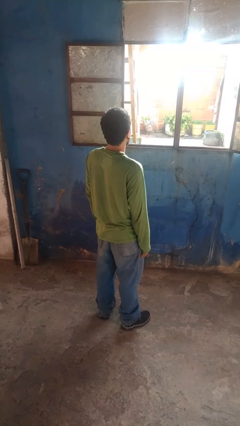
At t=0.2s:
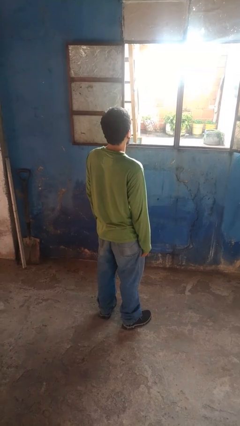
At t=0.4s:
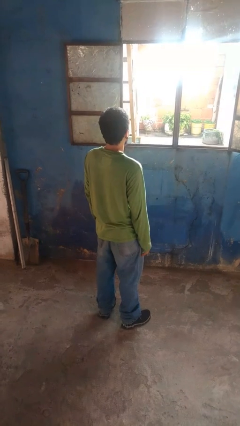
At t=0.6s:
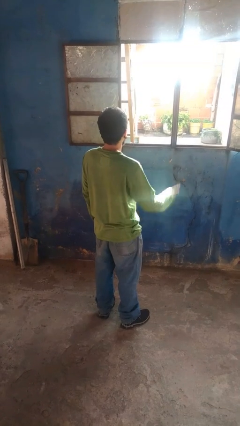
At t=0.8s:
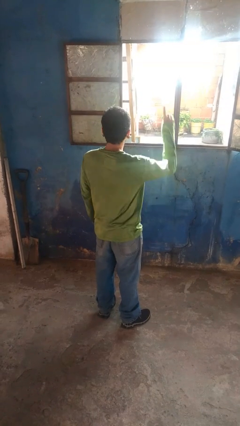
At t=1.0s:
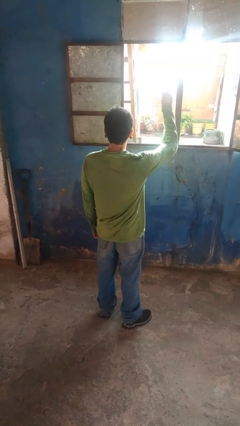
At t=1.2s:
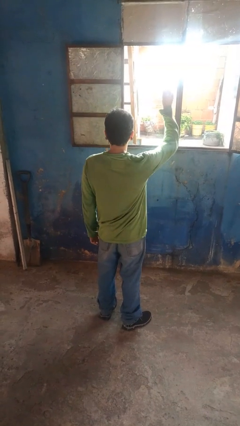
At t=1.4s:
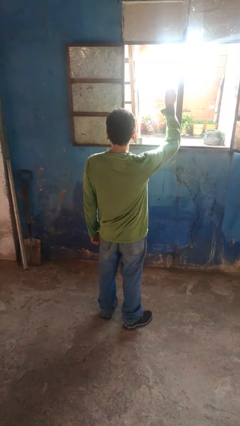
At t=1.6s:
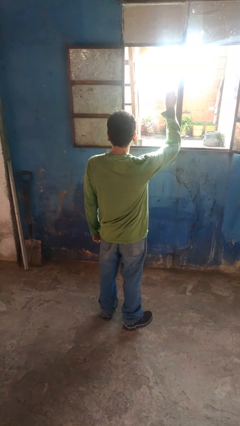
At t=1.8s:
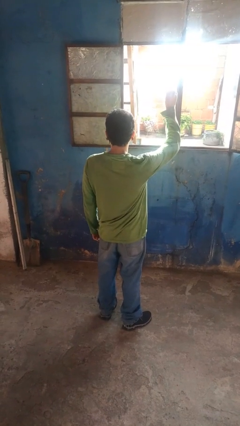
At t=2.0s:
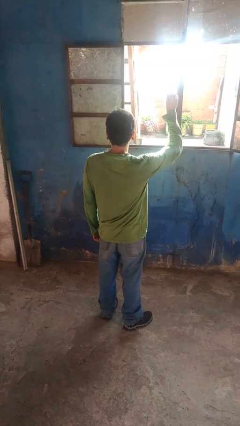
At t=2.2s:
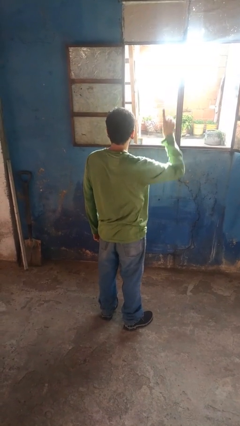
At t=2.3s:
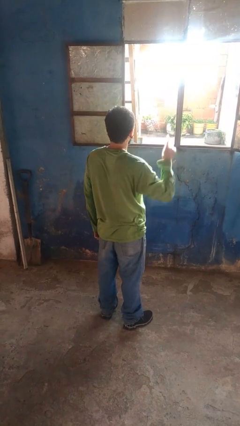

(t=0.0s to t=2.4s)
person gestures number one

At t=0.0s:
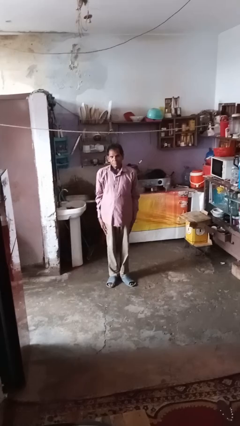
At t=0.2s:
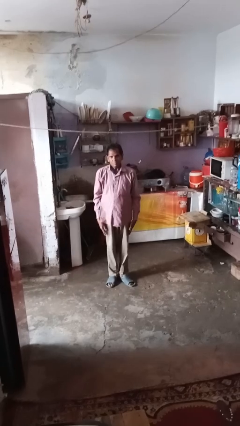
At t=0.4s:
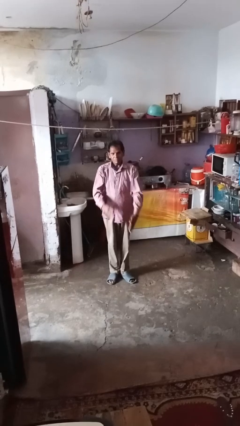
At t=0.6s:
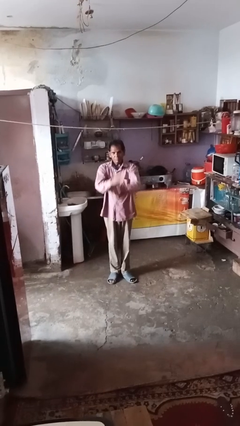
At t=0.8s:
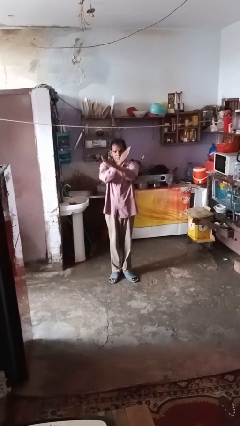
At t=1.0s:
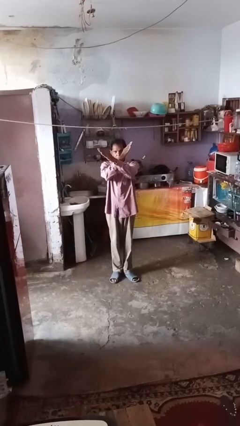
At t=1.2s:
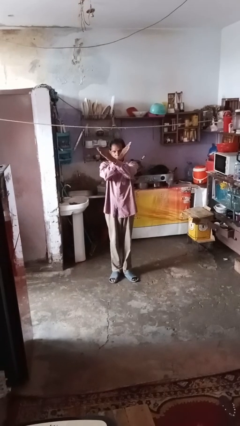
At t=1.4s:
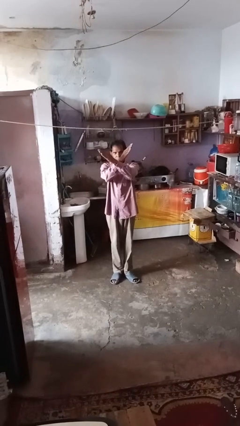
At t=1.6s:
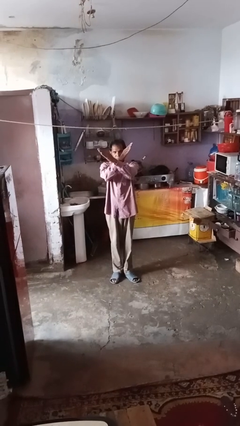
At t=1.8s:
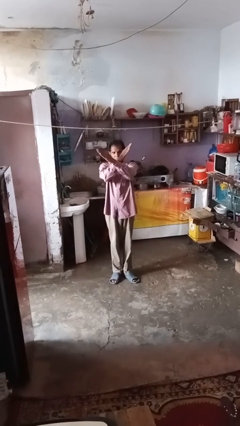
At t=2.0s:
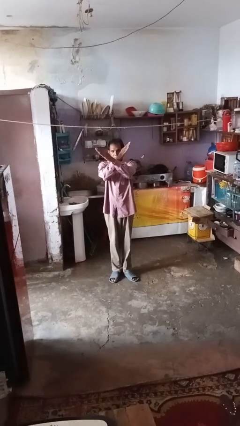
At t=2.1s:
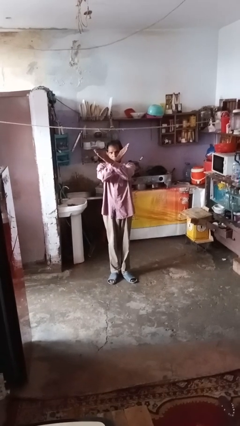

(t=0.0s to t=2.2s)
person gestures arms x

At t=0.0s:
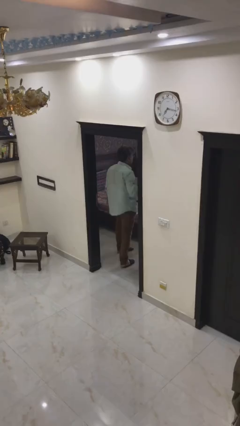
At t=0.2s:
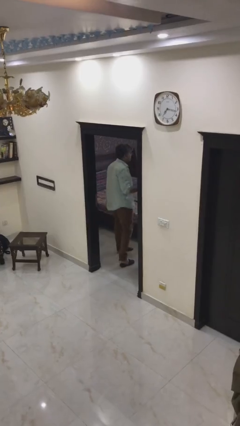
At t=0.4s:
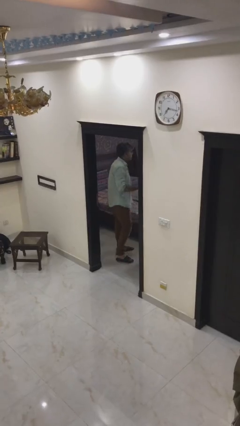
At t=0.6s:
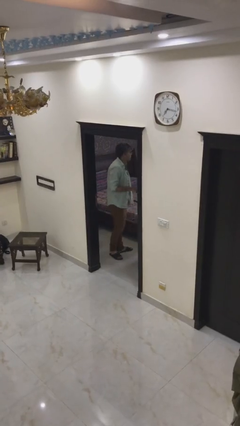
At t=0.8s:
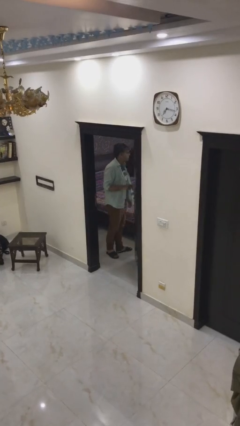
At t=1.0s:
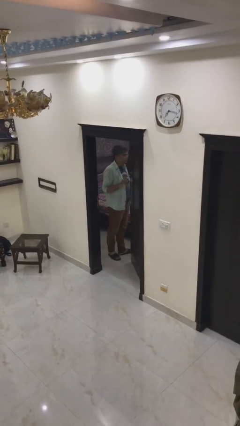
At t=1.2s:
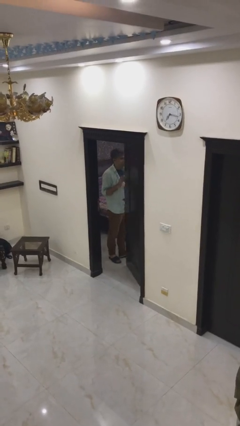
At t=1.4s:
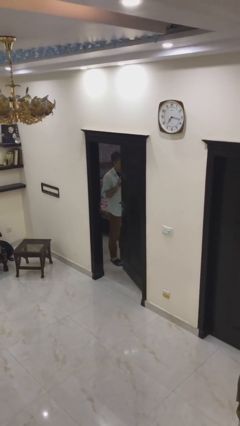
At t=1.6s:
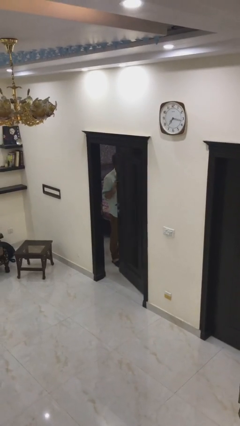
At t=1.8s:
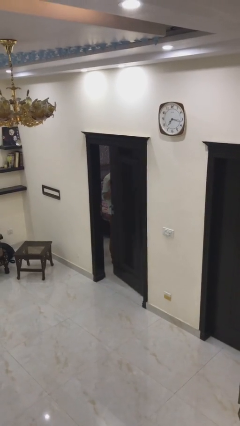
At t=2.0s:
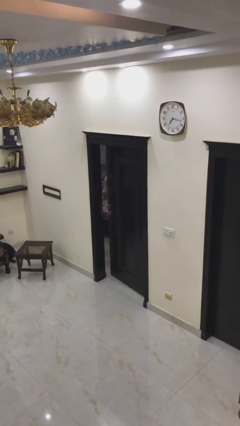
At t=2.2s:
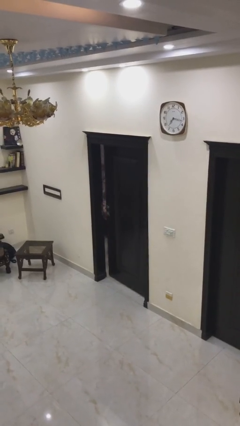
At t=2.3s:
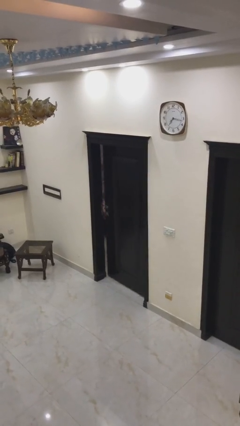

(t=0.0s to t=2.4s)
person closes facility door

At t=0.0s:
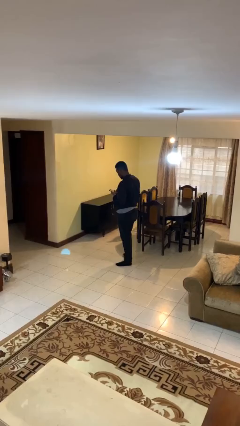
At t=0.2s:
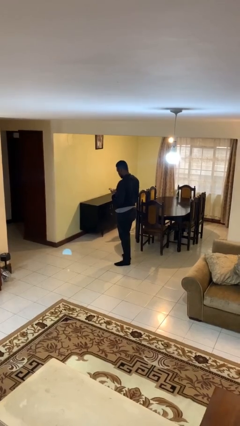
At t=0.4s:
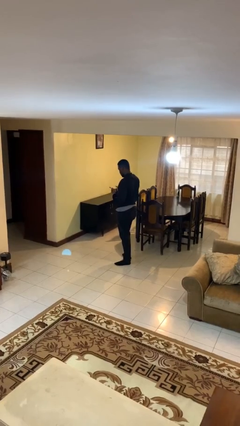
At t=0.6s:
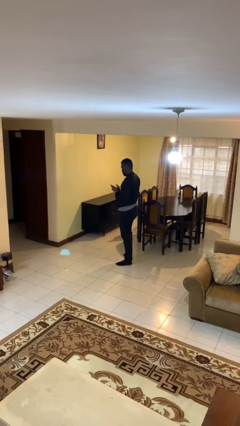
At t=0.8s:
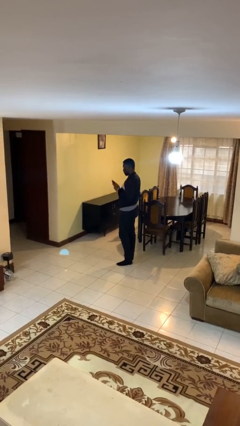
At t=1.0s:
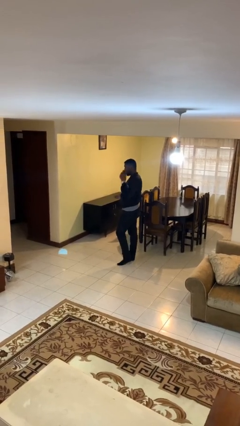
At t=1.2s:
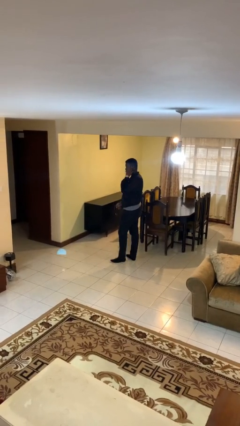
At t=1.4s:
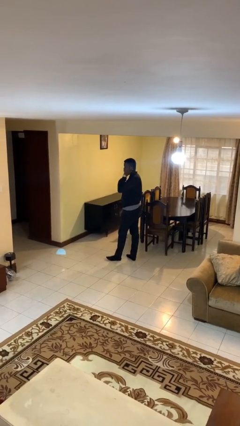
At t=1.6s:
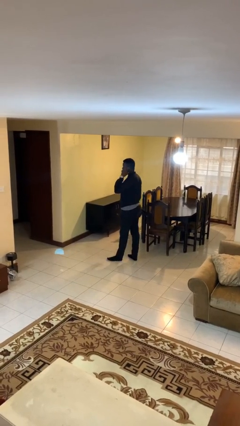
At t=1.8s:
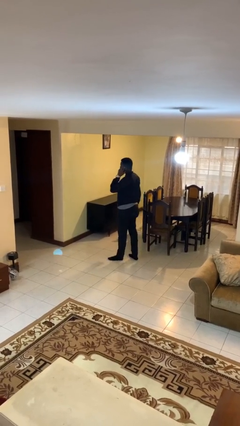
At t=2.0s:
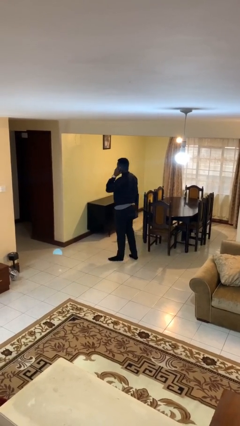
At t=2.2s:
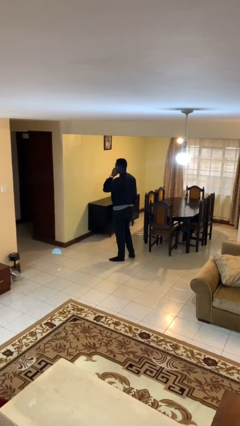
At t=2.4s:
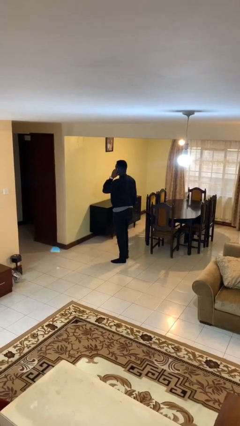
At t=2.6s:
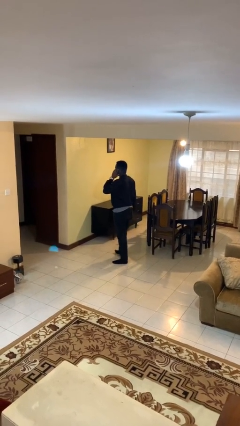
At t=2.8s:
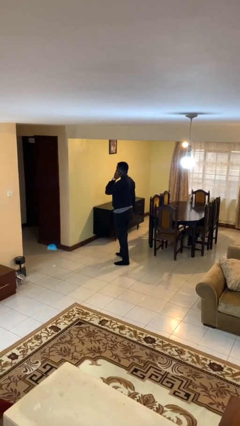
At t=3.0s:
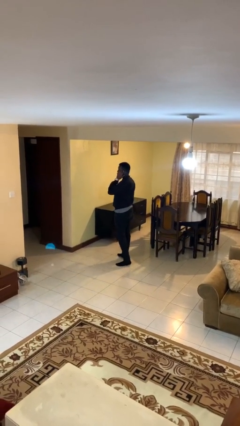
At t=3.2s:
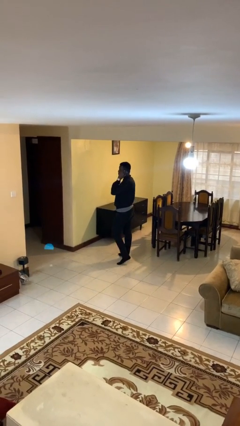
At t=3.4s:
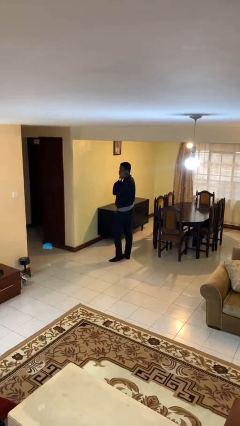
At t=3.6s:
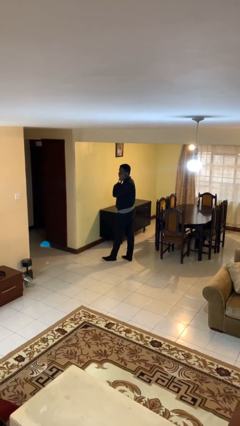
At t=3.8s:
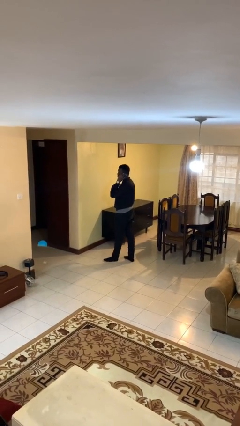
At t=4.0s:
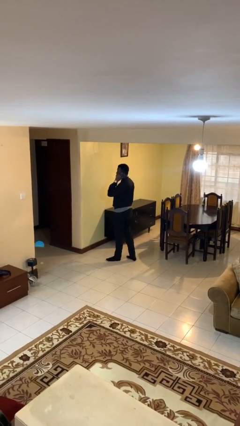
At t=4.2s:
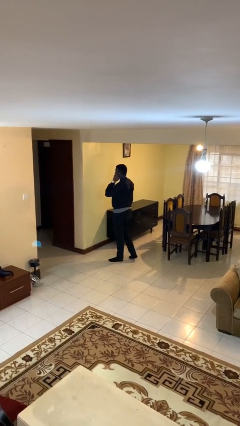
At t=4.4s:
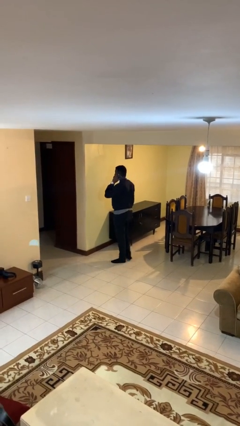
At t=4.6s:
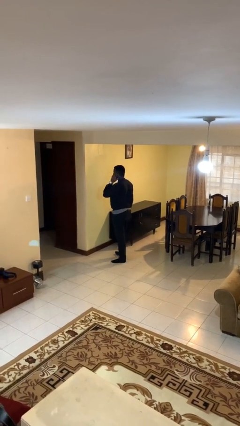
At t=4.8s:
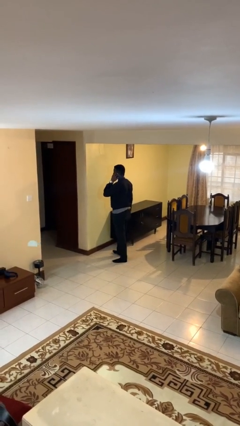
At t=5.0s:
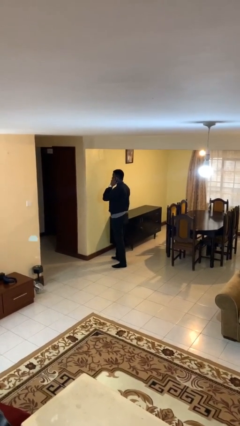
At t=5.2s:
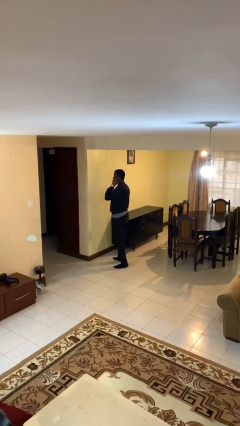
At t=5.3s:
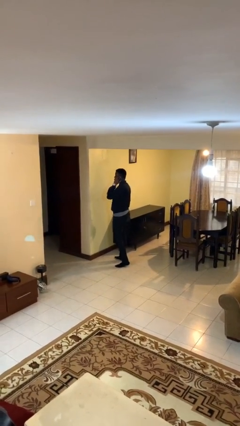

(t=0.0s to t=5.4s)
person talks on phone

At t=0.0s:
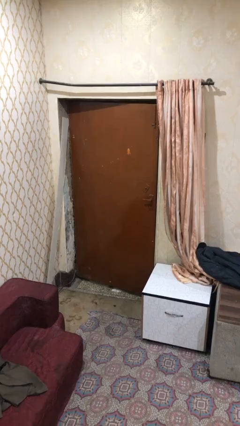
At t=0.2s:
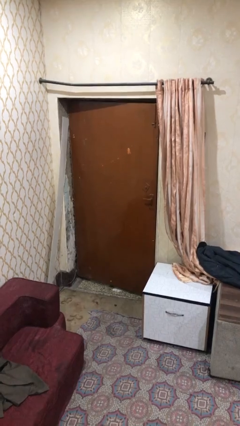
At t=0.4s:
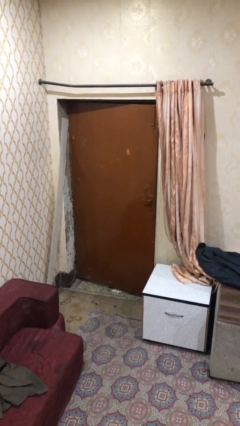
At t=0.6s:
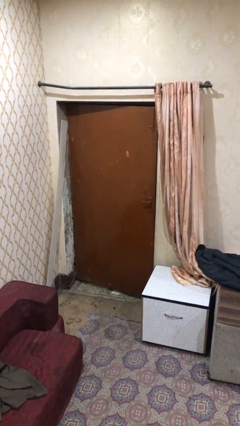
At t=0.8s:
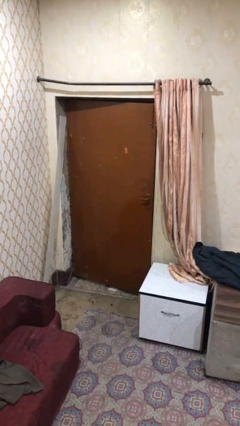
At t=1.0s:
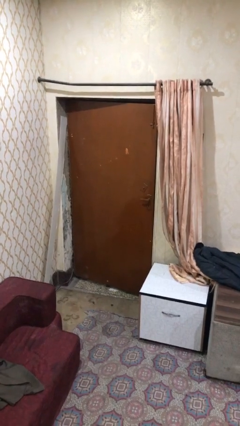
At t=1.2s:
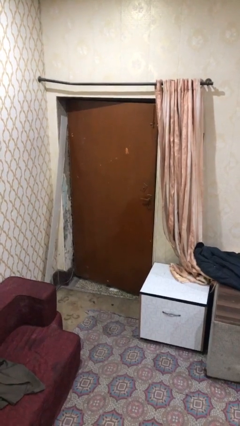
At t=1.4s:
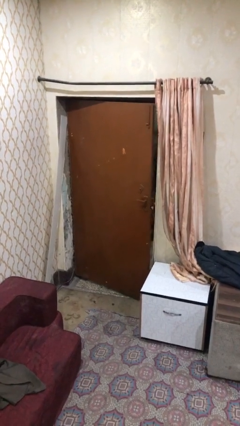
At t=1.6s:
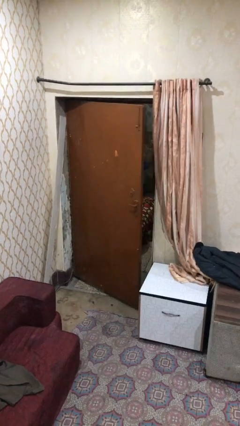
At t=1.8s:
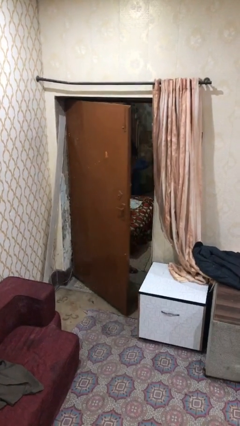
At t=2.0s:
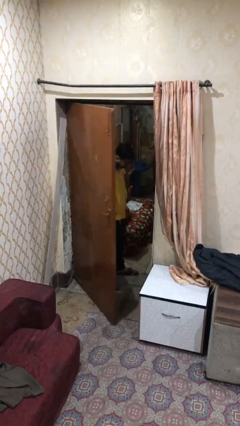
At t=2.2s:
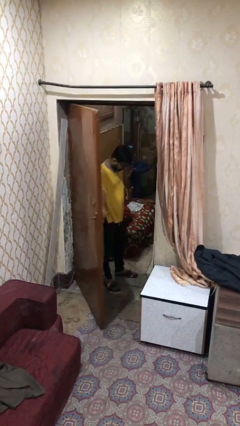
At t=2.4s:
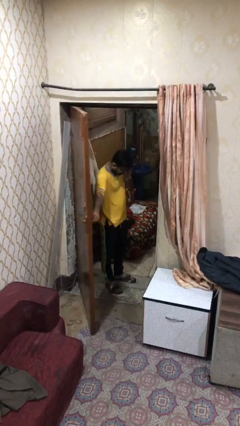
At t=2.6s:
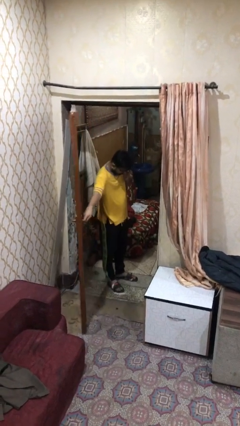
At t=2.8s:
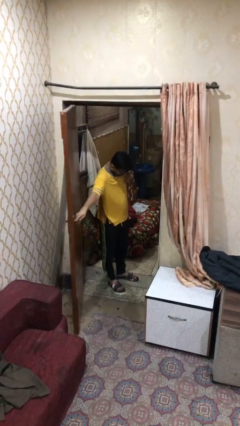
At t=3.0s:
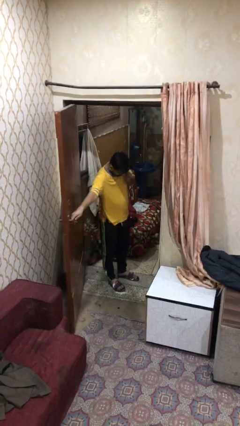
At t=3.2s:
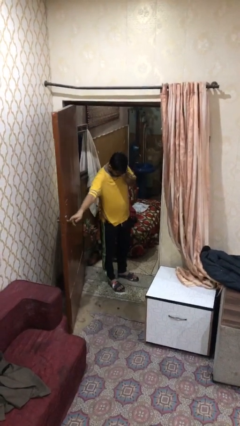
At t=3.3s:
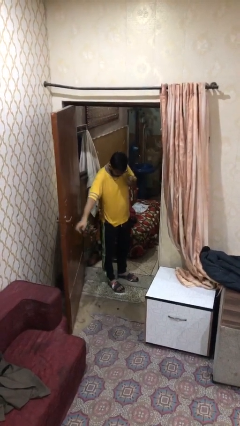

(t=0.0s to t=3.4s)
person opens facility door

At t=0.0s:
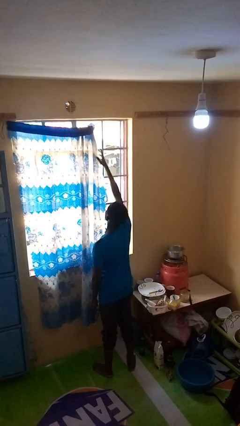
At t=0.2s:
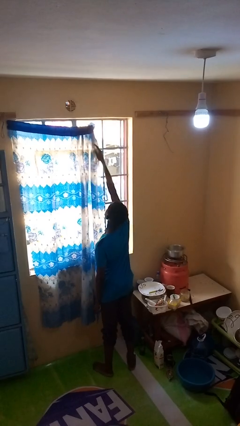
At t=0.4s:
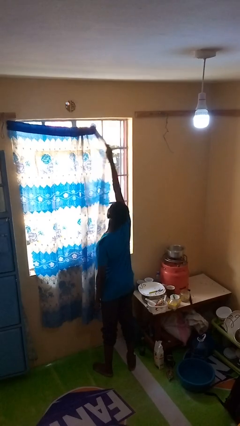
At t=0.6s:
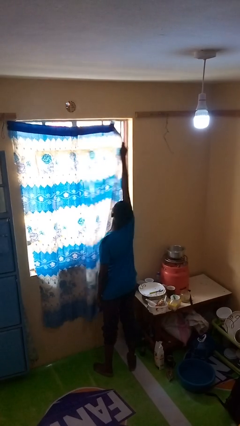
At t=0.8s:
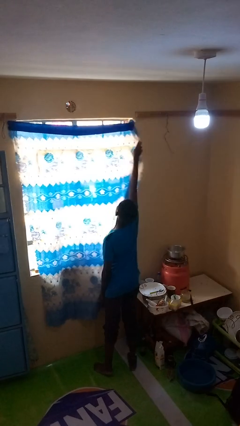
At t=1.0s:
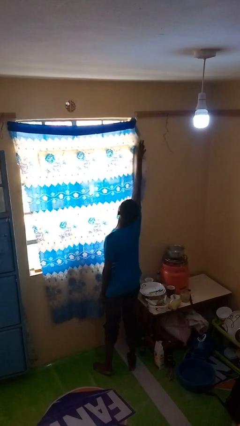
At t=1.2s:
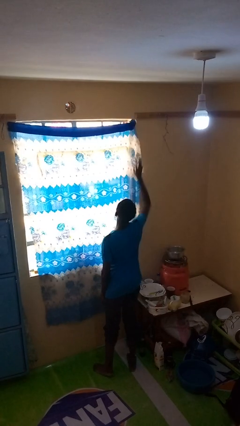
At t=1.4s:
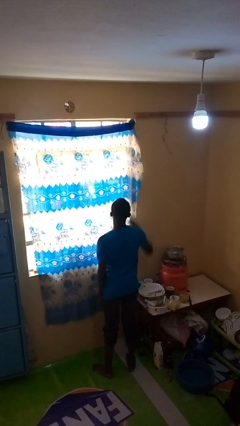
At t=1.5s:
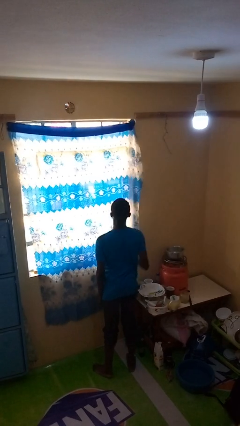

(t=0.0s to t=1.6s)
person closes curtains

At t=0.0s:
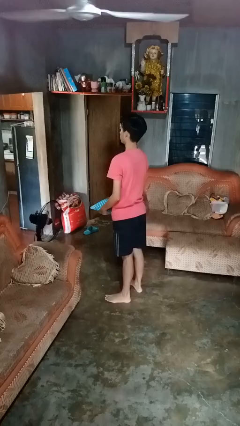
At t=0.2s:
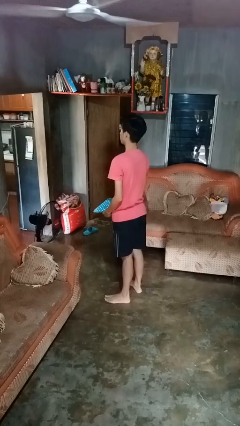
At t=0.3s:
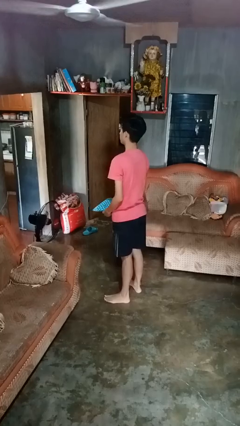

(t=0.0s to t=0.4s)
person catches dropped object
